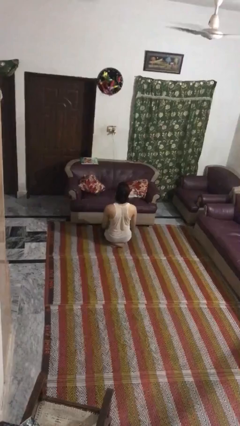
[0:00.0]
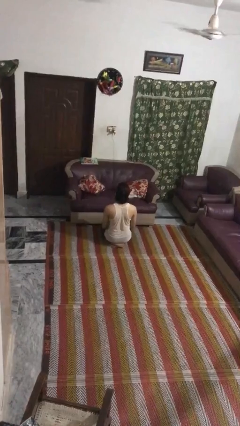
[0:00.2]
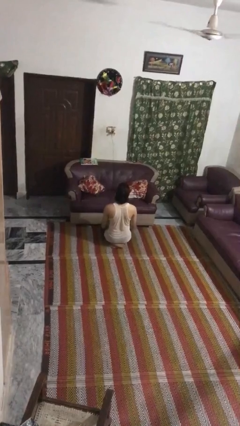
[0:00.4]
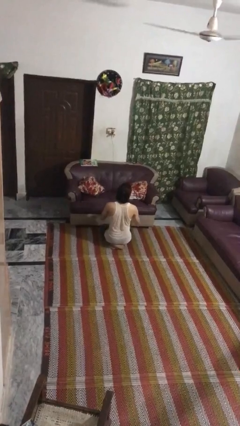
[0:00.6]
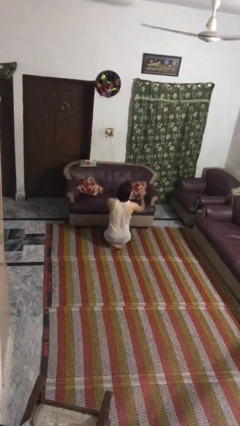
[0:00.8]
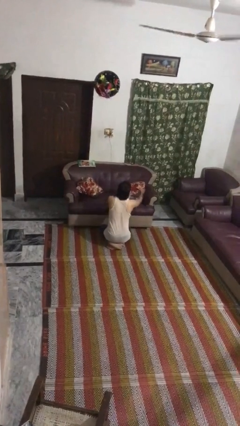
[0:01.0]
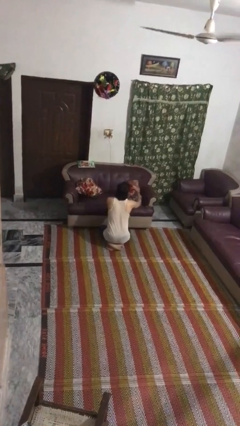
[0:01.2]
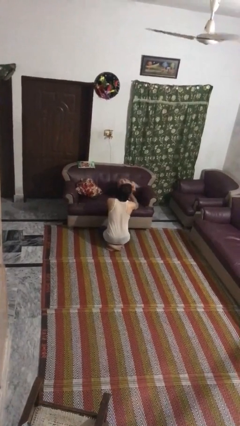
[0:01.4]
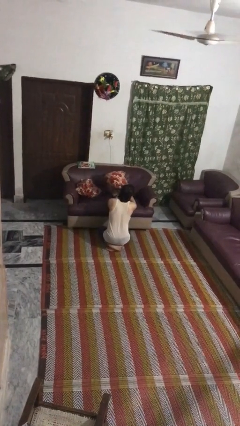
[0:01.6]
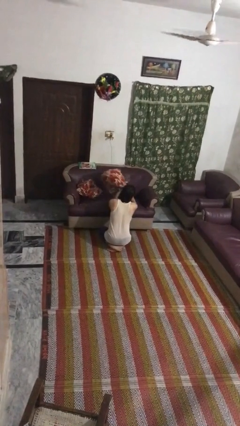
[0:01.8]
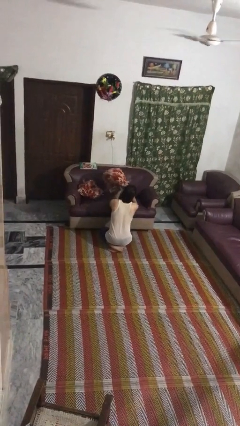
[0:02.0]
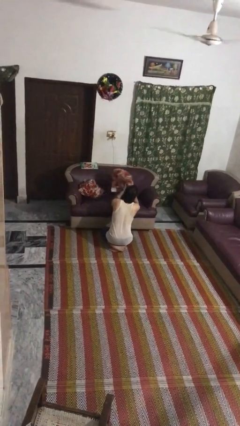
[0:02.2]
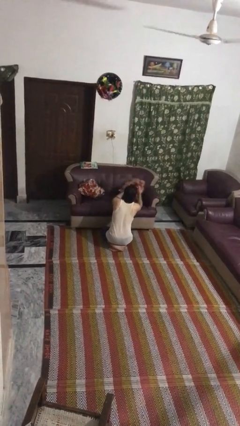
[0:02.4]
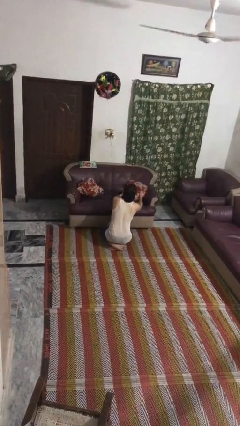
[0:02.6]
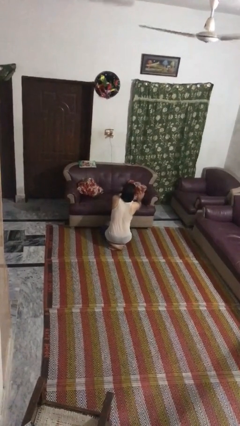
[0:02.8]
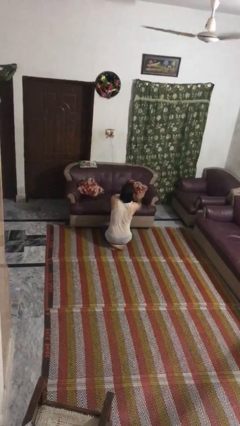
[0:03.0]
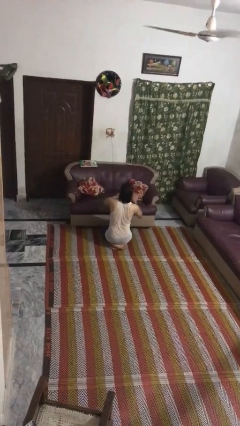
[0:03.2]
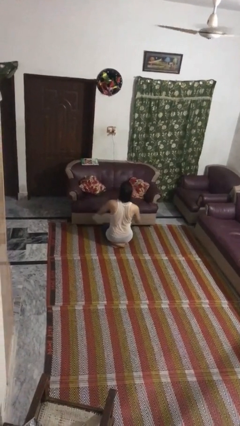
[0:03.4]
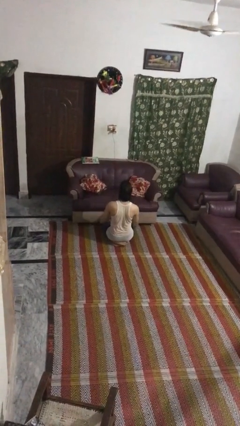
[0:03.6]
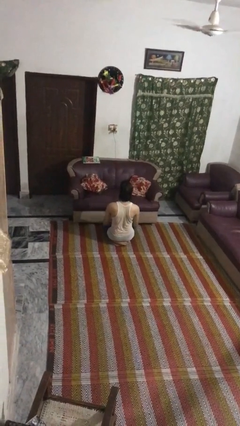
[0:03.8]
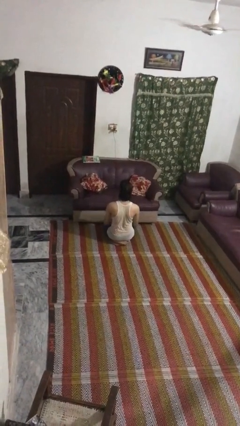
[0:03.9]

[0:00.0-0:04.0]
person searches in couch

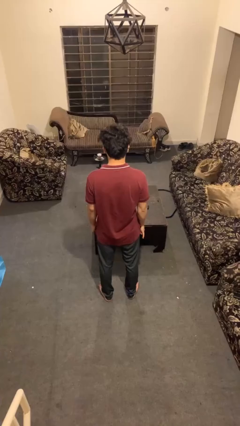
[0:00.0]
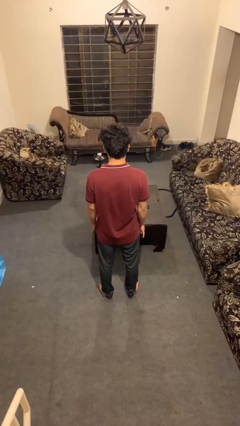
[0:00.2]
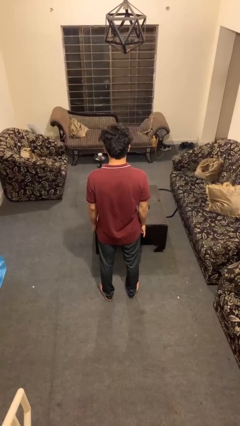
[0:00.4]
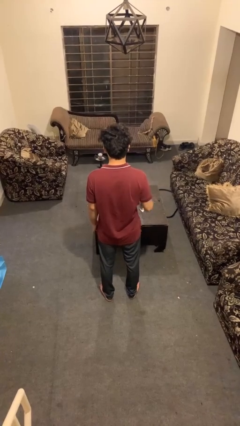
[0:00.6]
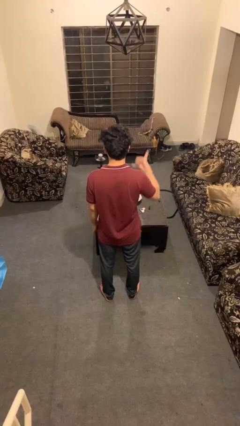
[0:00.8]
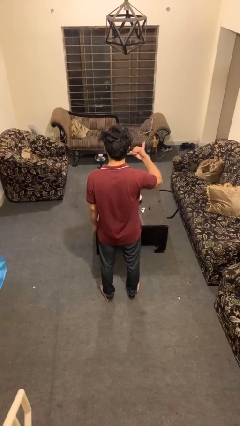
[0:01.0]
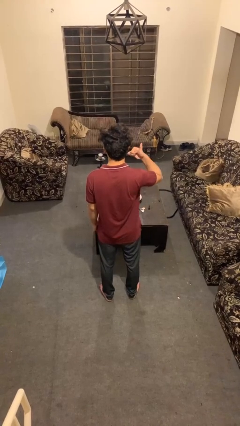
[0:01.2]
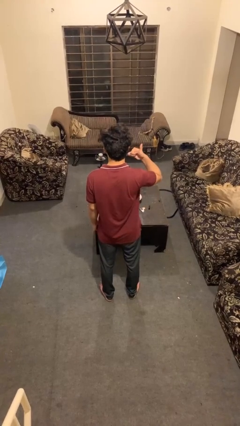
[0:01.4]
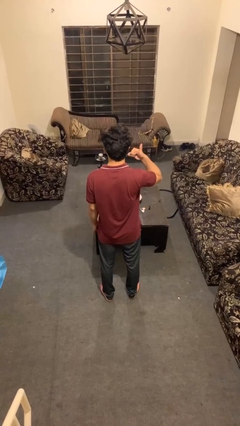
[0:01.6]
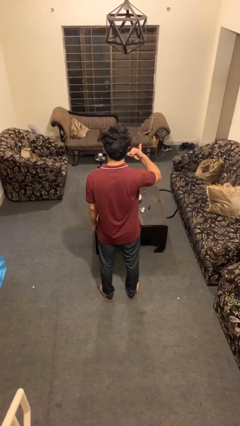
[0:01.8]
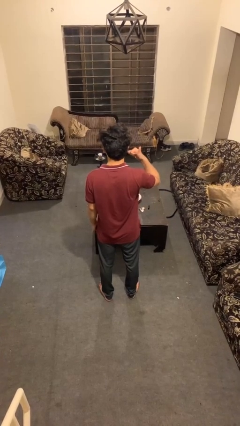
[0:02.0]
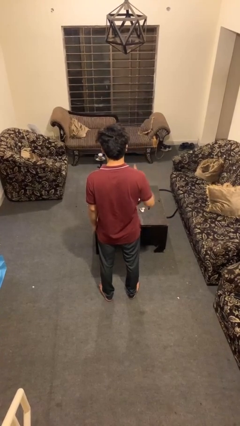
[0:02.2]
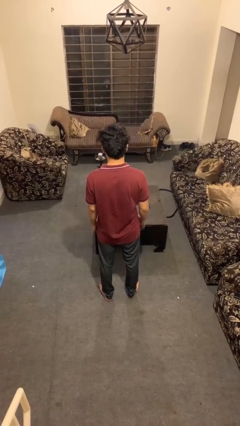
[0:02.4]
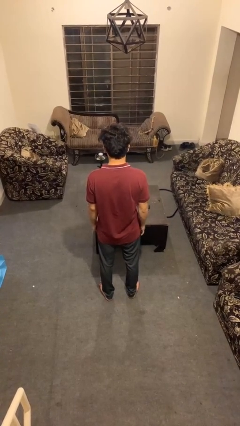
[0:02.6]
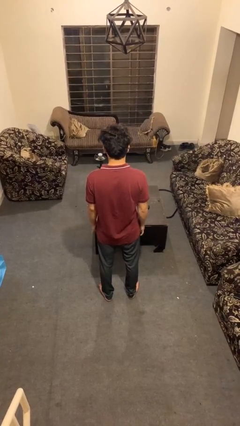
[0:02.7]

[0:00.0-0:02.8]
person gestures call me

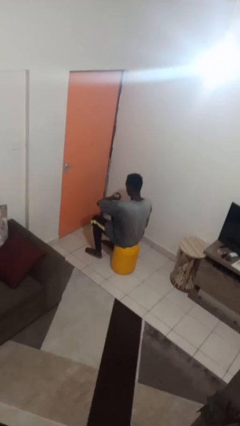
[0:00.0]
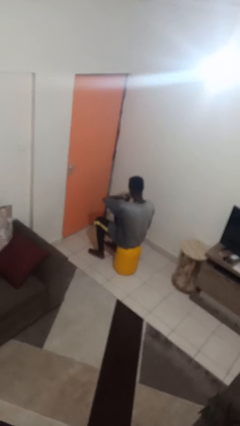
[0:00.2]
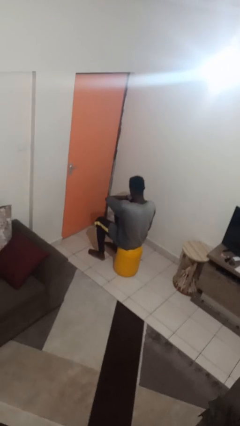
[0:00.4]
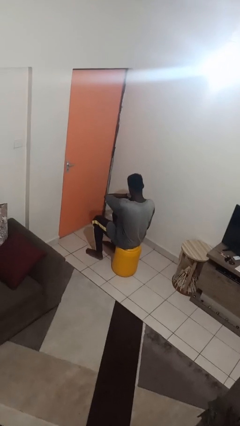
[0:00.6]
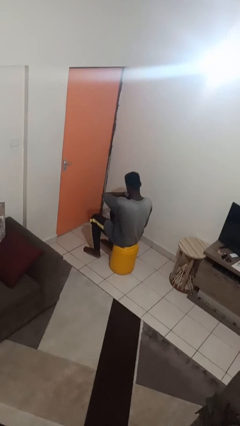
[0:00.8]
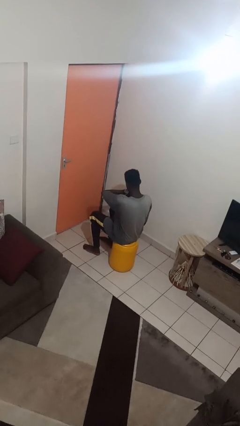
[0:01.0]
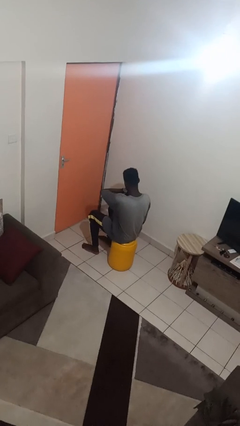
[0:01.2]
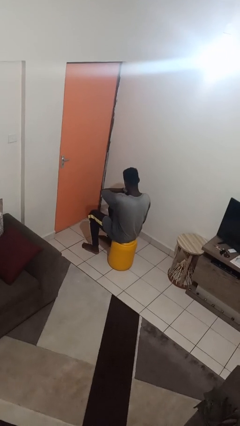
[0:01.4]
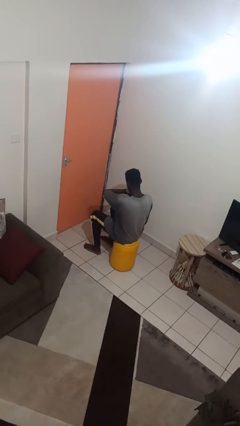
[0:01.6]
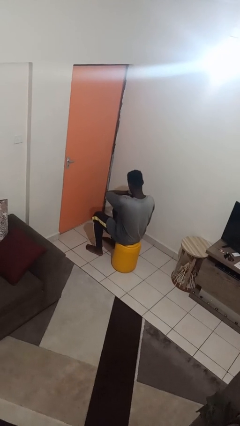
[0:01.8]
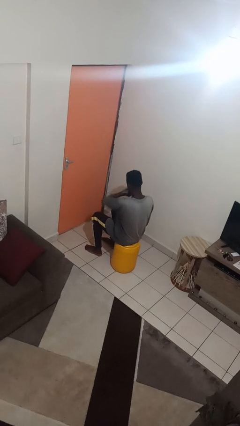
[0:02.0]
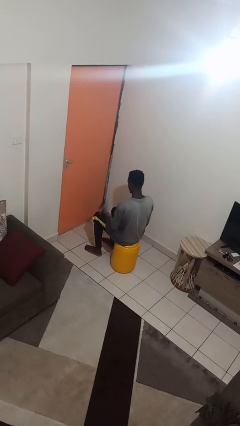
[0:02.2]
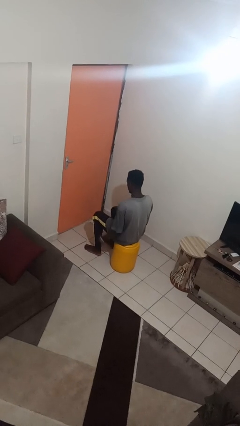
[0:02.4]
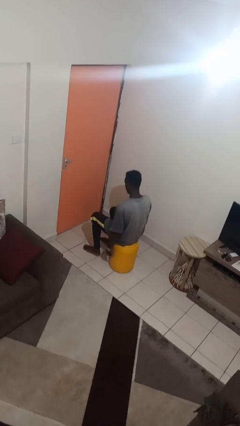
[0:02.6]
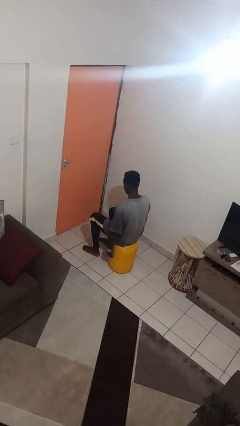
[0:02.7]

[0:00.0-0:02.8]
person looks at wristwatch

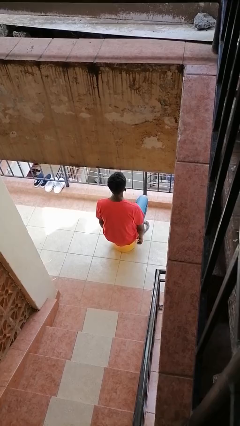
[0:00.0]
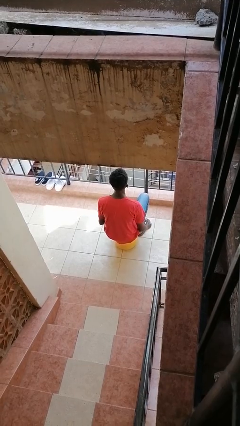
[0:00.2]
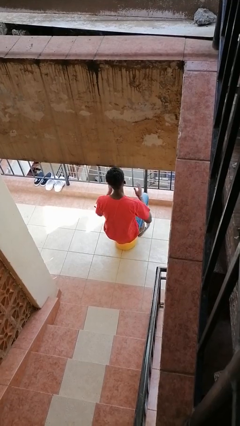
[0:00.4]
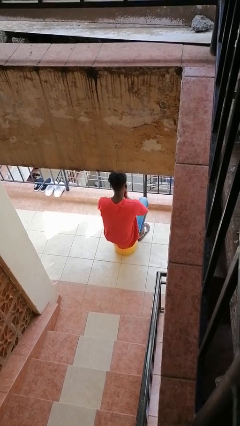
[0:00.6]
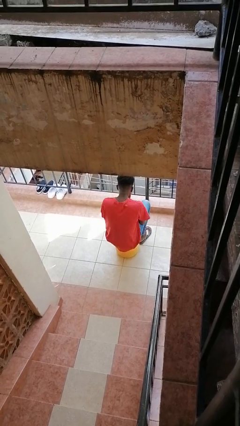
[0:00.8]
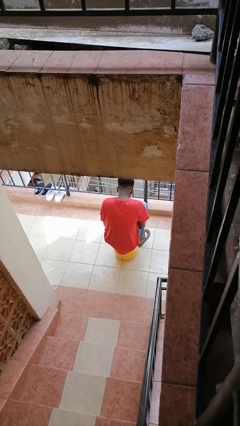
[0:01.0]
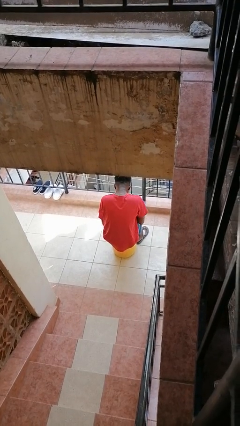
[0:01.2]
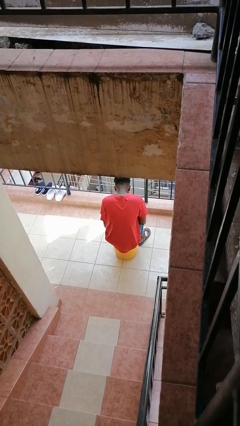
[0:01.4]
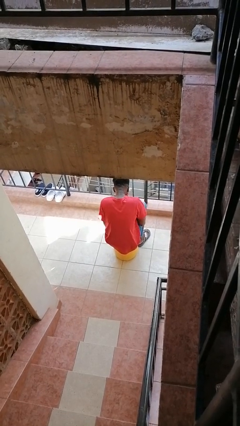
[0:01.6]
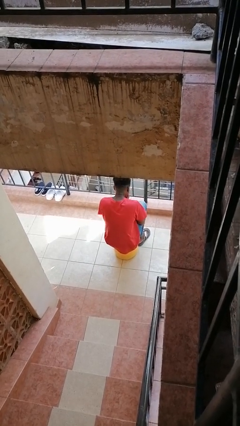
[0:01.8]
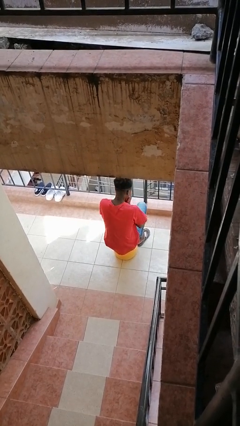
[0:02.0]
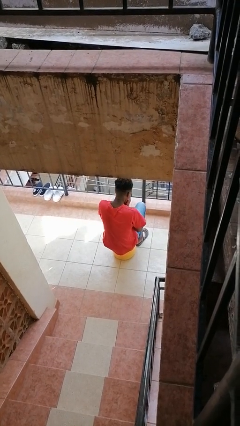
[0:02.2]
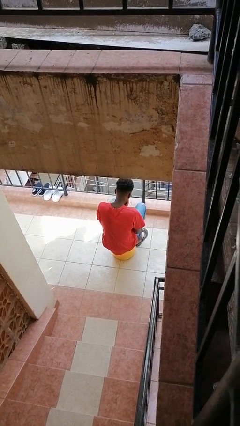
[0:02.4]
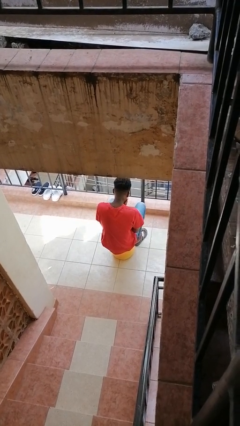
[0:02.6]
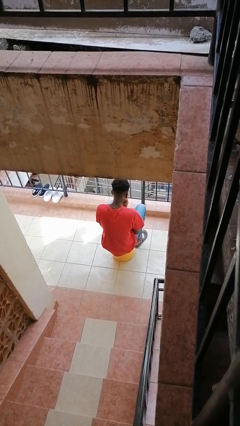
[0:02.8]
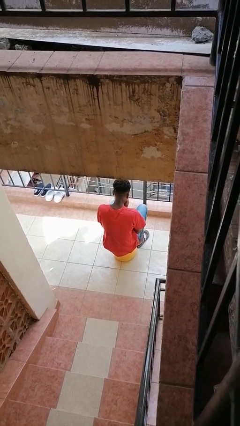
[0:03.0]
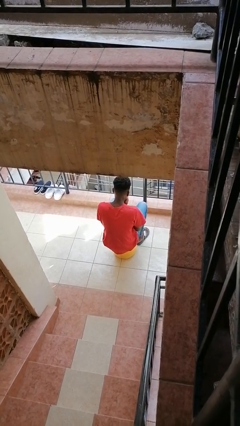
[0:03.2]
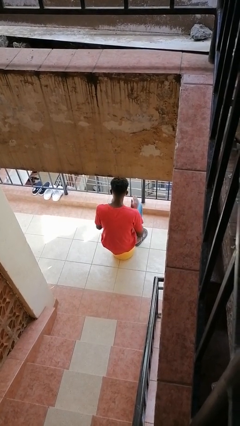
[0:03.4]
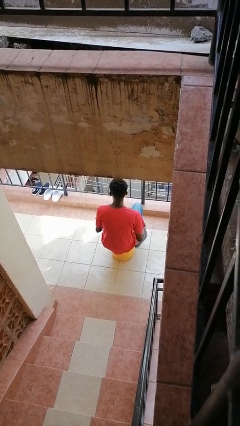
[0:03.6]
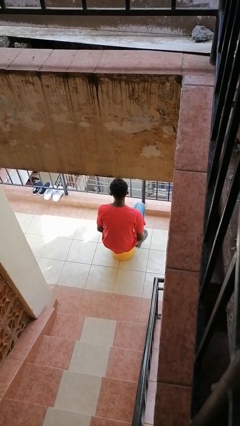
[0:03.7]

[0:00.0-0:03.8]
person blows into hands

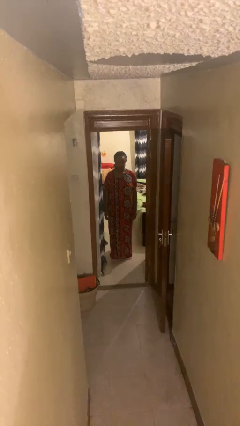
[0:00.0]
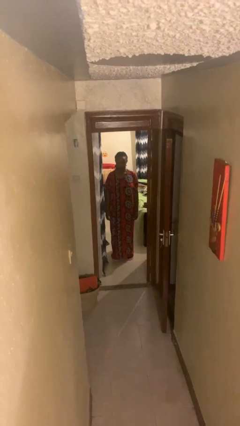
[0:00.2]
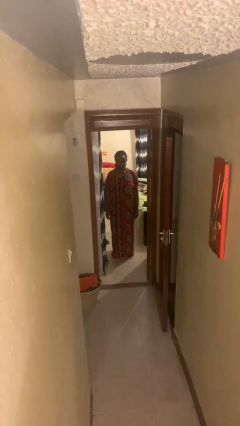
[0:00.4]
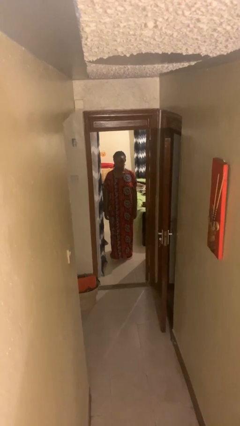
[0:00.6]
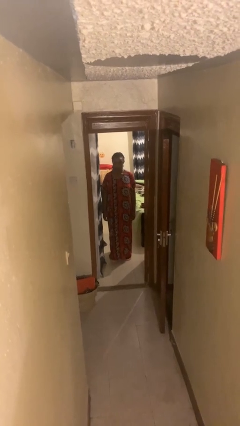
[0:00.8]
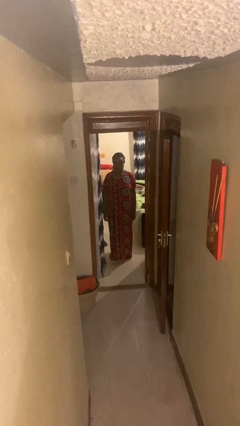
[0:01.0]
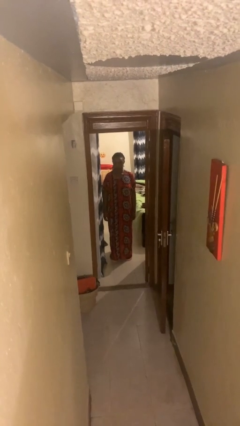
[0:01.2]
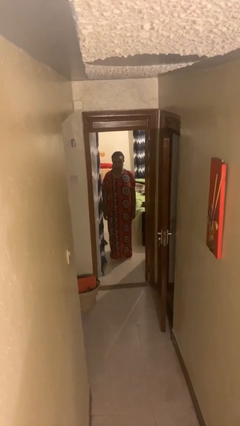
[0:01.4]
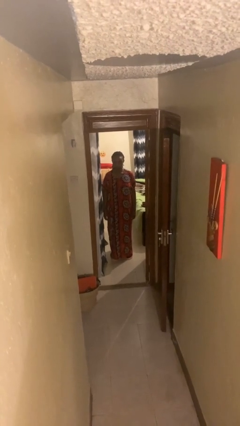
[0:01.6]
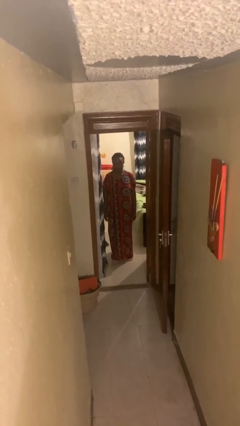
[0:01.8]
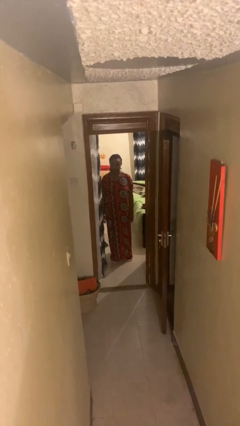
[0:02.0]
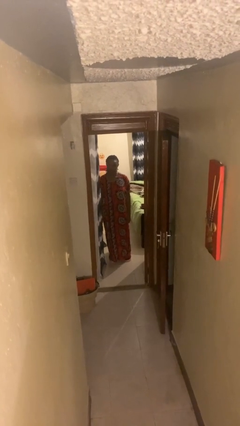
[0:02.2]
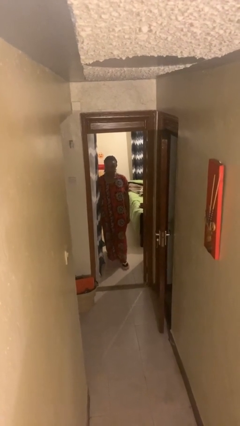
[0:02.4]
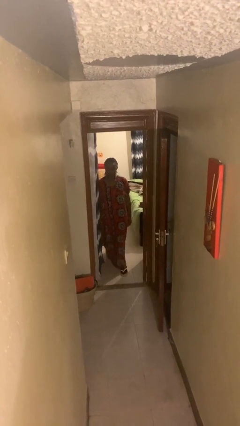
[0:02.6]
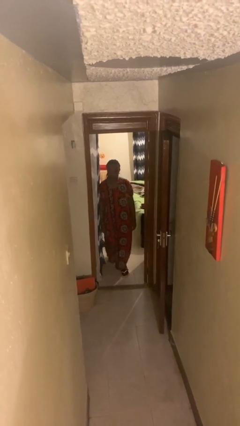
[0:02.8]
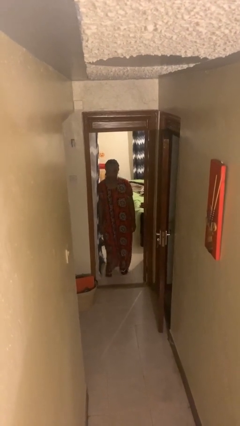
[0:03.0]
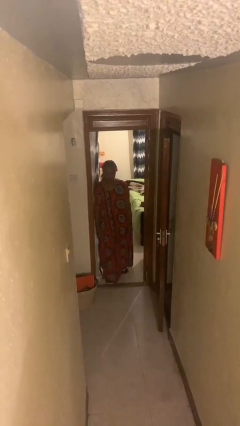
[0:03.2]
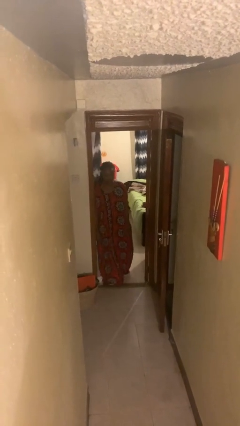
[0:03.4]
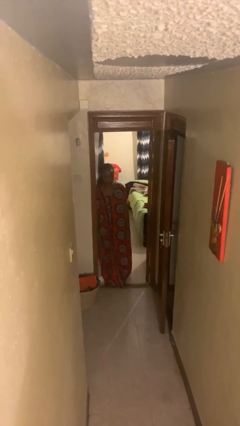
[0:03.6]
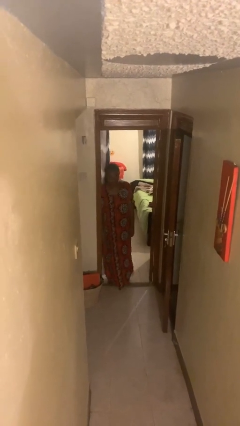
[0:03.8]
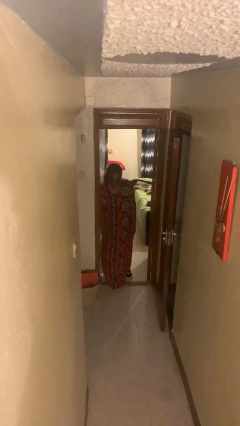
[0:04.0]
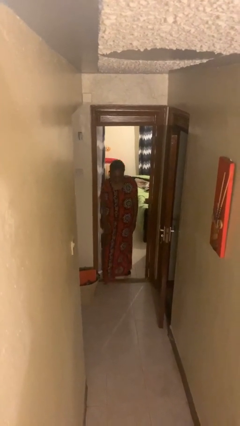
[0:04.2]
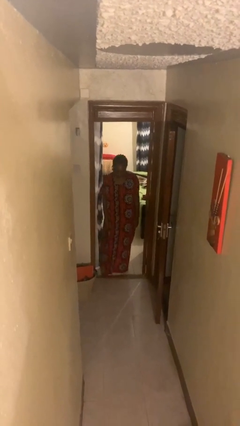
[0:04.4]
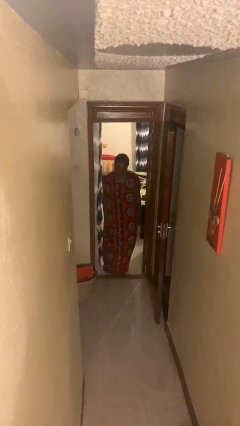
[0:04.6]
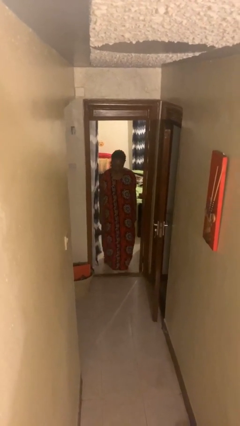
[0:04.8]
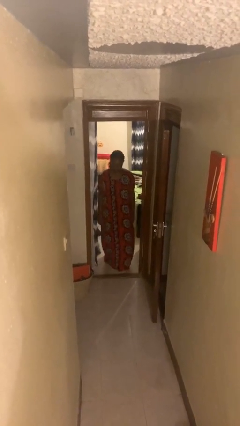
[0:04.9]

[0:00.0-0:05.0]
person bumps into wall
